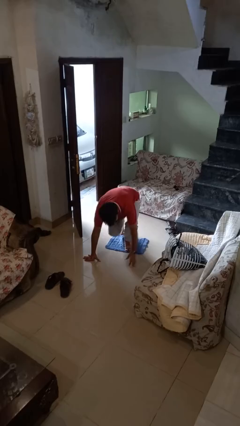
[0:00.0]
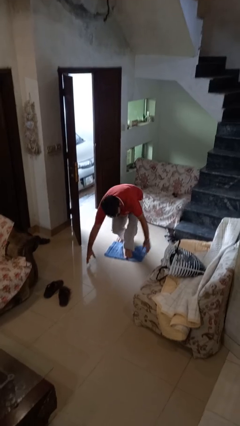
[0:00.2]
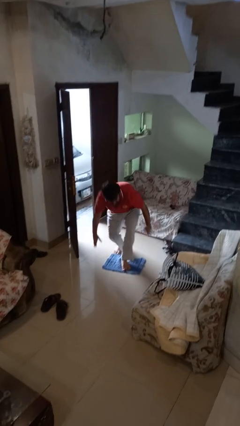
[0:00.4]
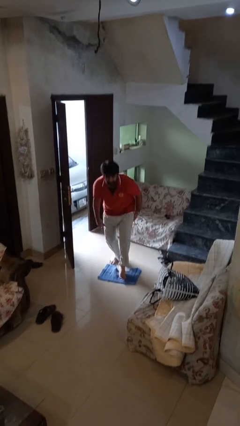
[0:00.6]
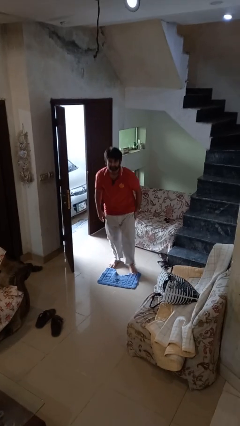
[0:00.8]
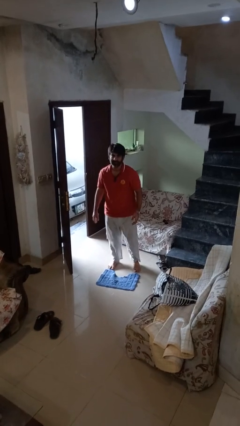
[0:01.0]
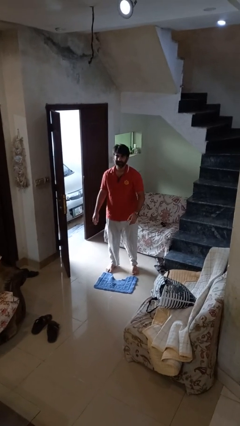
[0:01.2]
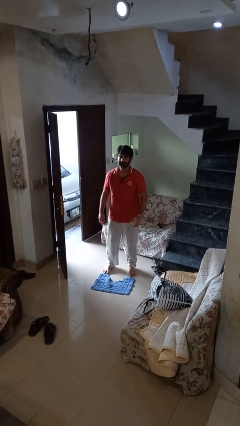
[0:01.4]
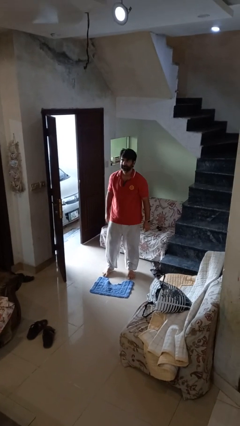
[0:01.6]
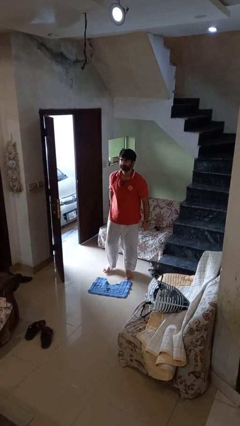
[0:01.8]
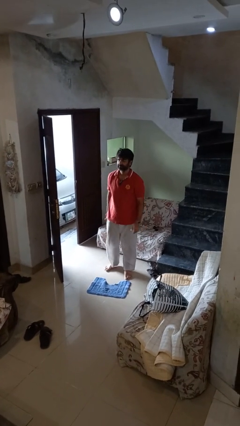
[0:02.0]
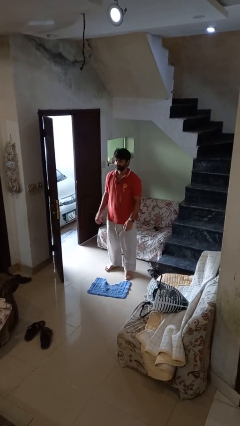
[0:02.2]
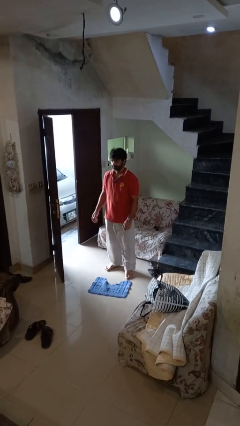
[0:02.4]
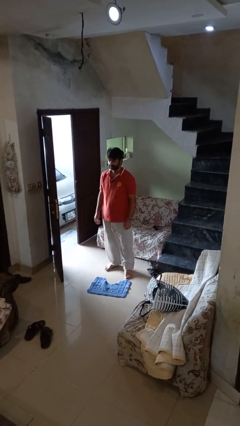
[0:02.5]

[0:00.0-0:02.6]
person stands up from floor

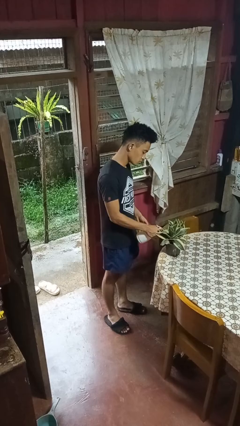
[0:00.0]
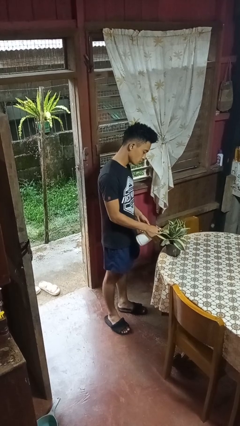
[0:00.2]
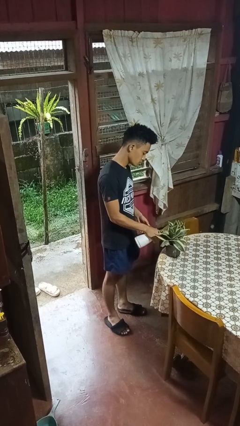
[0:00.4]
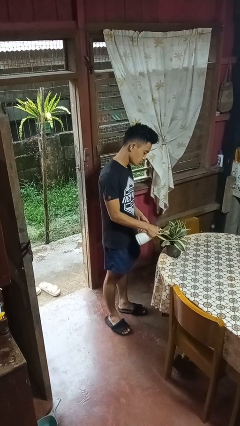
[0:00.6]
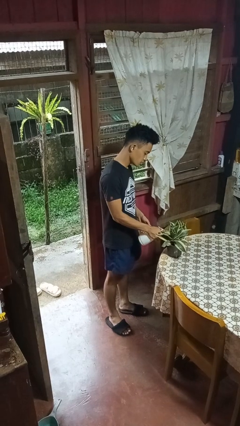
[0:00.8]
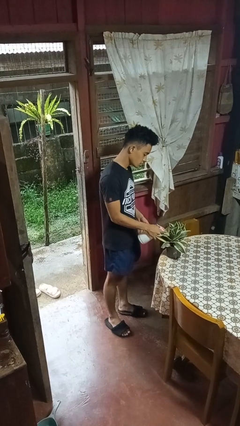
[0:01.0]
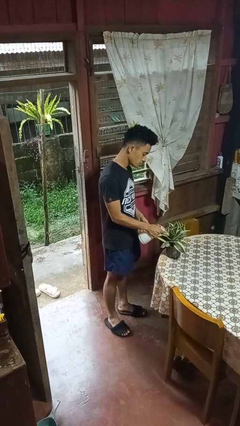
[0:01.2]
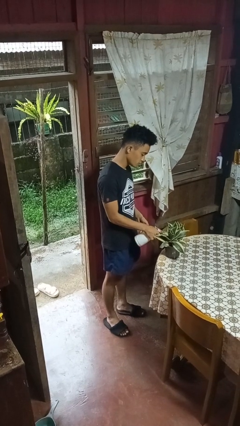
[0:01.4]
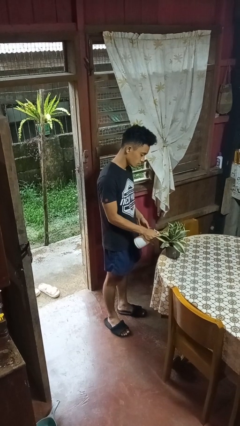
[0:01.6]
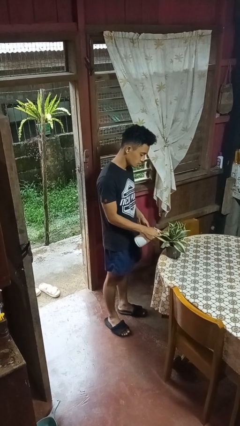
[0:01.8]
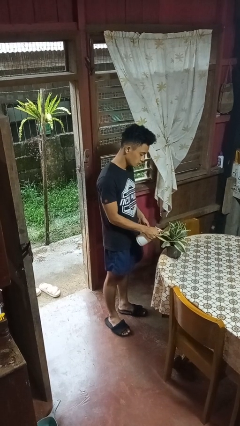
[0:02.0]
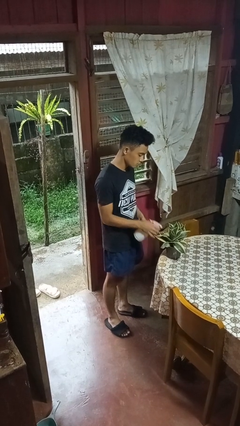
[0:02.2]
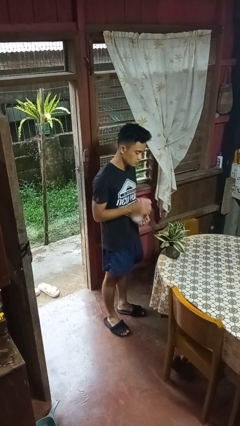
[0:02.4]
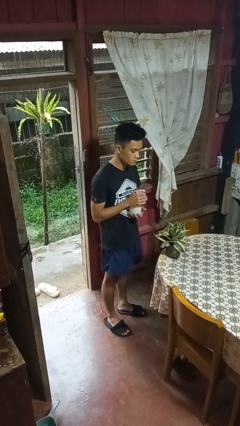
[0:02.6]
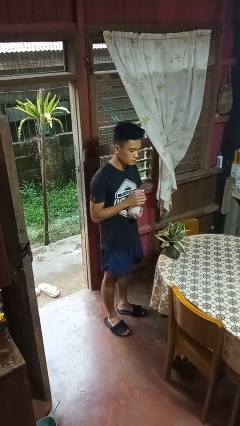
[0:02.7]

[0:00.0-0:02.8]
person waters houseplant

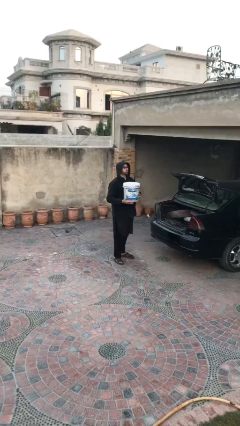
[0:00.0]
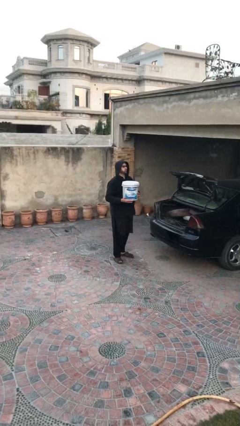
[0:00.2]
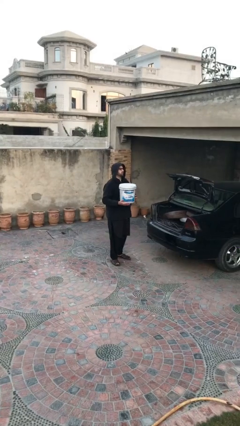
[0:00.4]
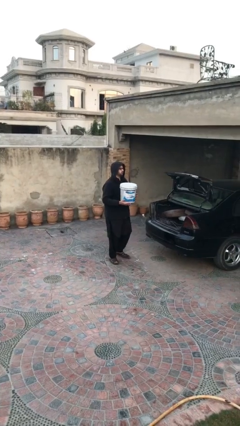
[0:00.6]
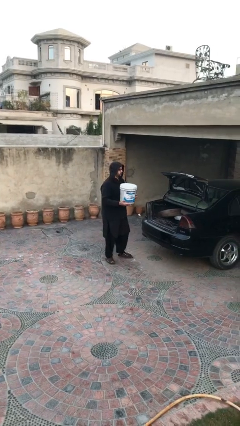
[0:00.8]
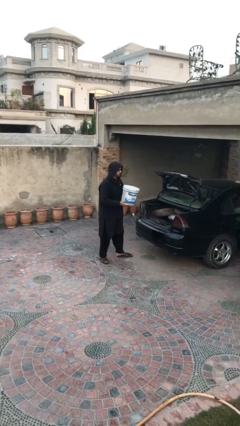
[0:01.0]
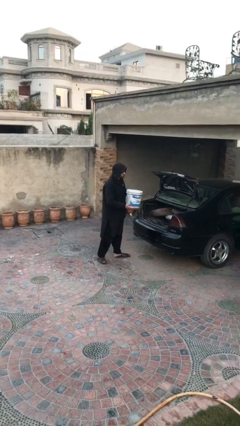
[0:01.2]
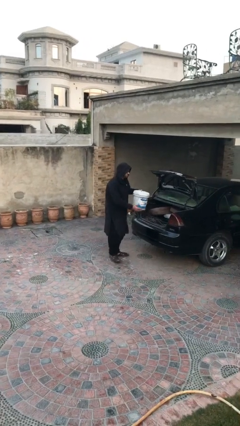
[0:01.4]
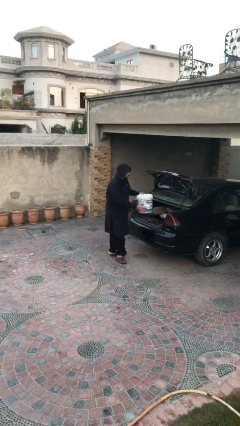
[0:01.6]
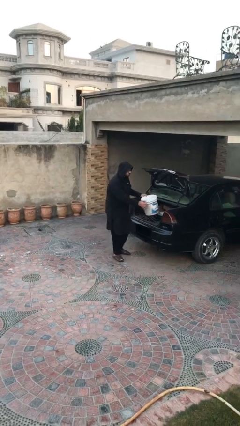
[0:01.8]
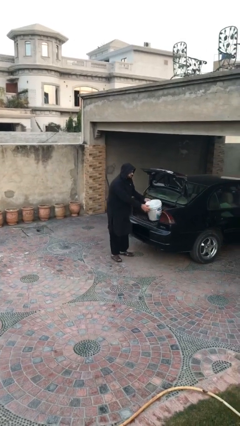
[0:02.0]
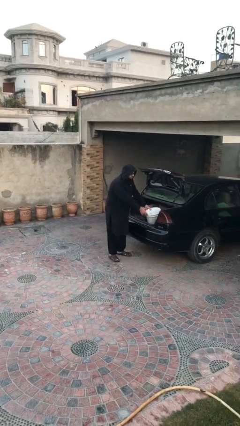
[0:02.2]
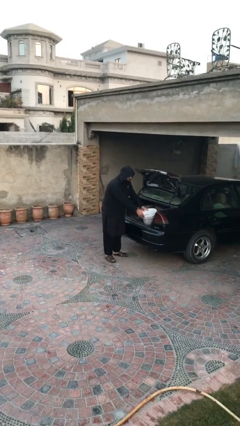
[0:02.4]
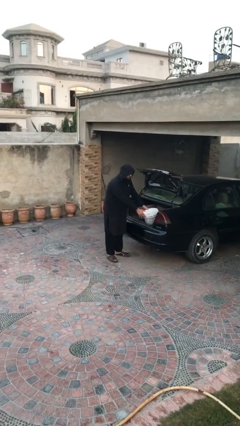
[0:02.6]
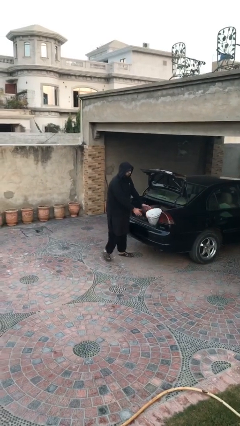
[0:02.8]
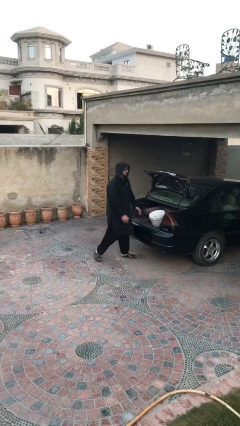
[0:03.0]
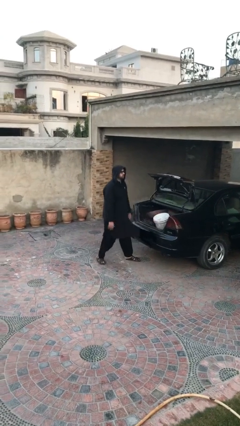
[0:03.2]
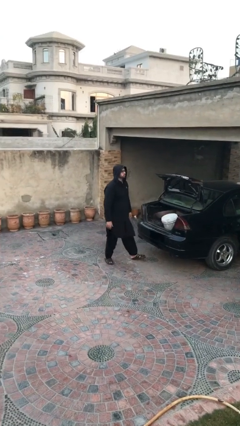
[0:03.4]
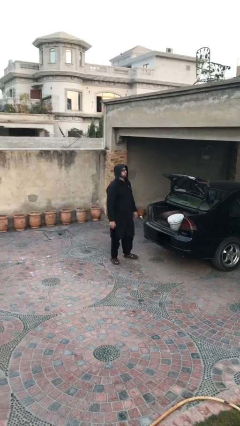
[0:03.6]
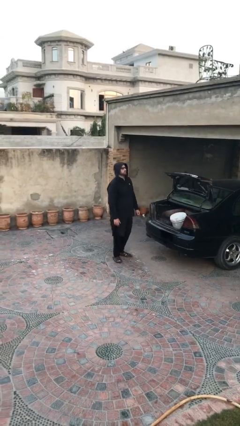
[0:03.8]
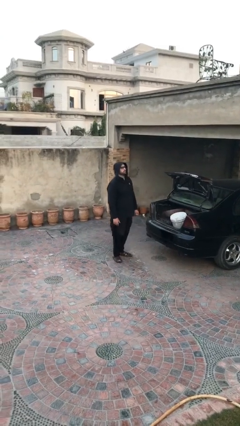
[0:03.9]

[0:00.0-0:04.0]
person loads car

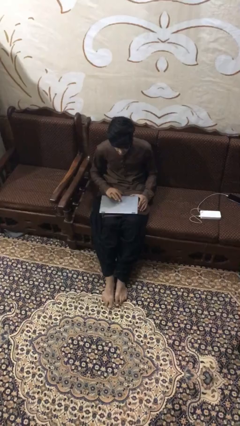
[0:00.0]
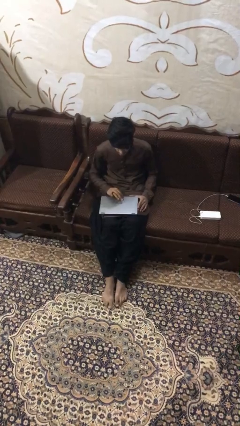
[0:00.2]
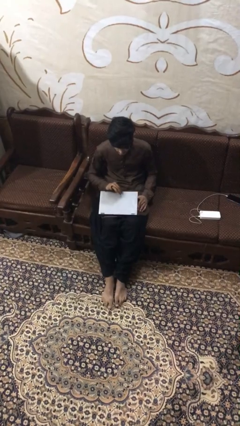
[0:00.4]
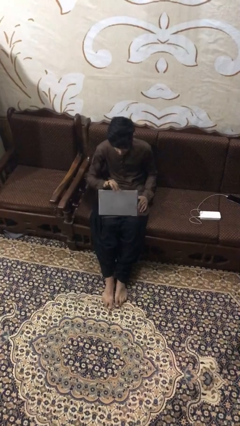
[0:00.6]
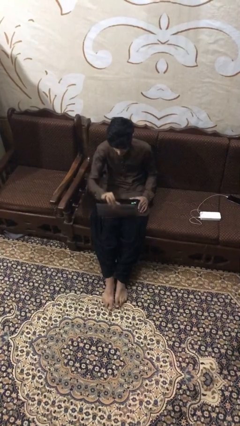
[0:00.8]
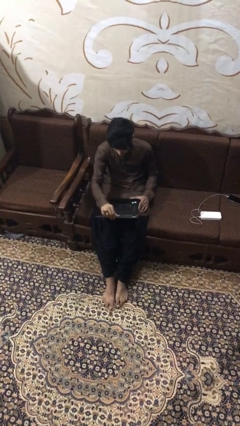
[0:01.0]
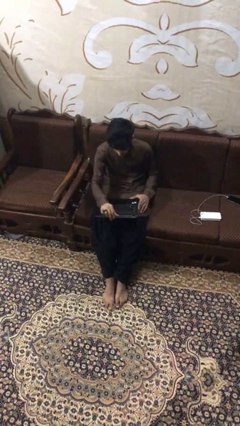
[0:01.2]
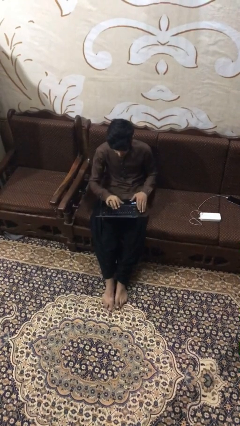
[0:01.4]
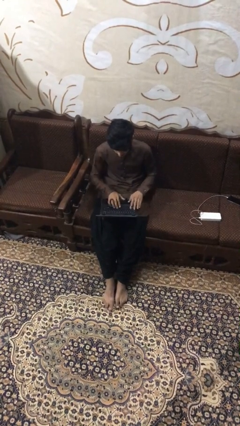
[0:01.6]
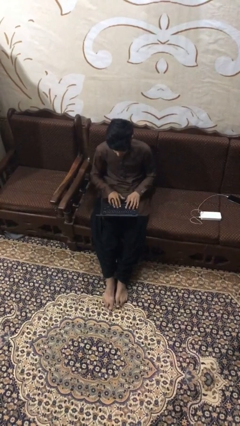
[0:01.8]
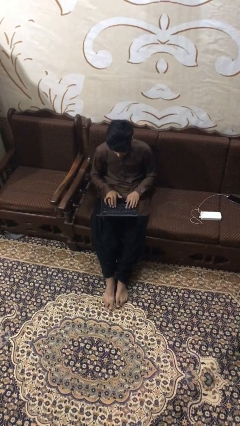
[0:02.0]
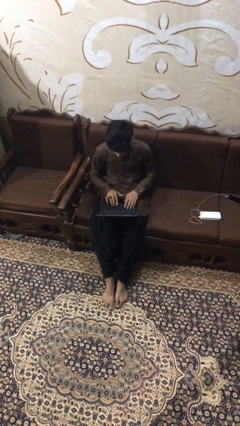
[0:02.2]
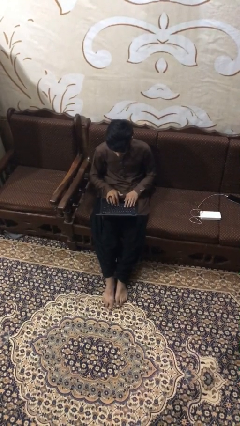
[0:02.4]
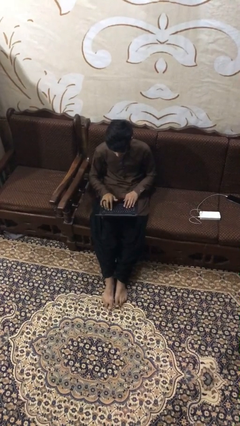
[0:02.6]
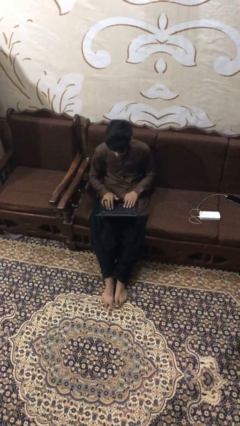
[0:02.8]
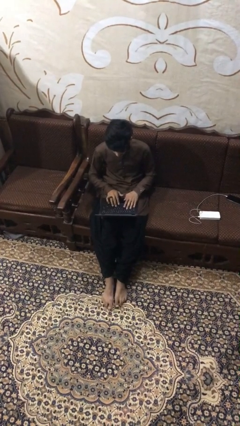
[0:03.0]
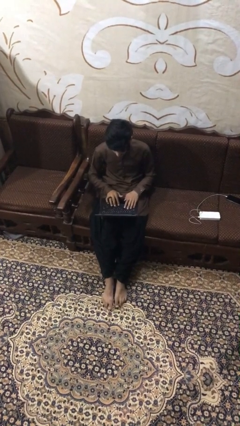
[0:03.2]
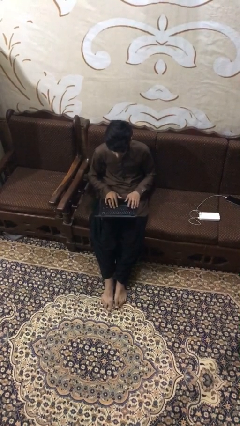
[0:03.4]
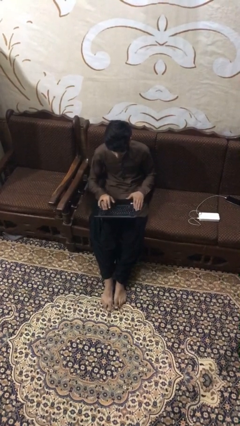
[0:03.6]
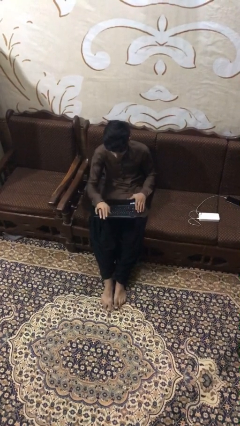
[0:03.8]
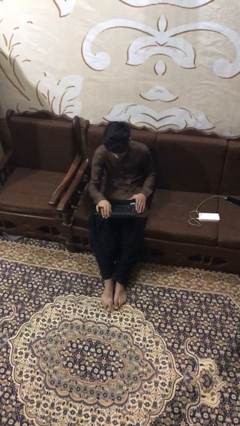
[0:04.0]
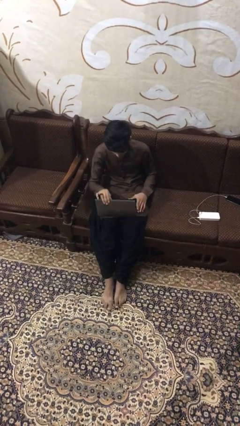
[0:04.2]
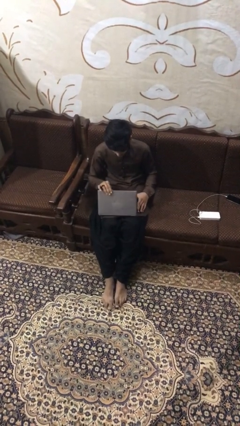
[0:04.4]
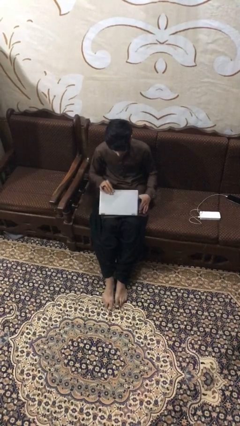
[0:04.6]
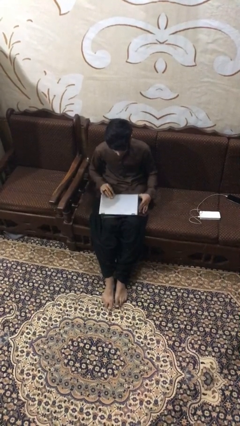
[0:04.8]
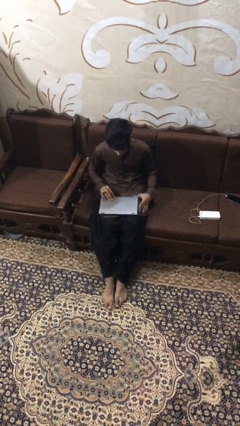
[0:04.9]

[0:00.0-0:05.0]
person interacts with laptop

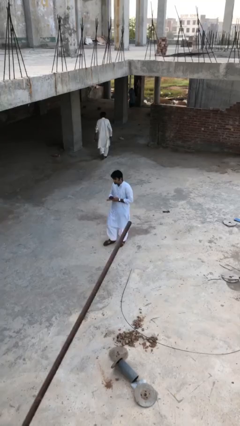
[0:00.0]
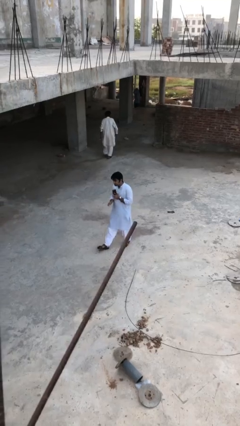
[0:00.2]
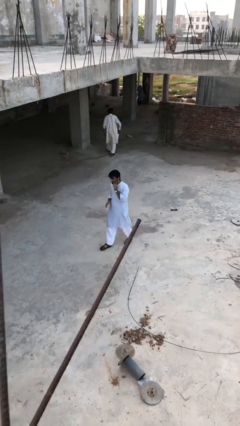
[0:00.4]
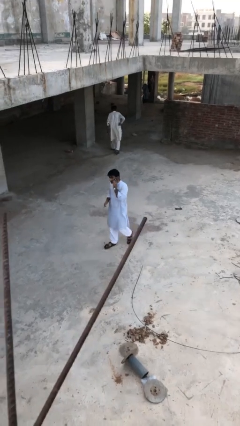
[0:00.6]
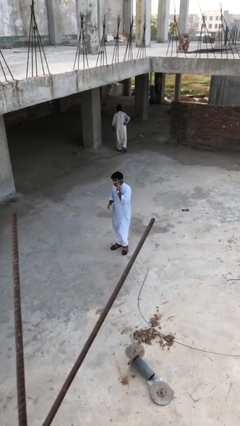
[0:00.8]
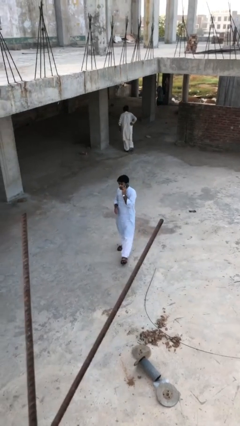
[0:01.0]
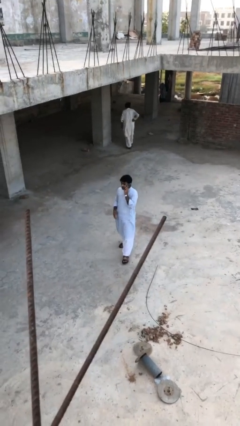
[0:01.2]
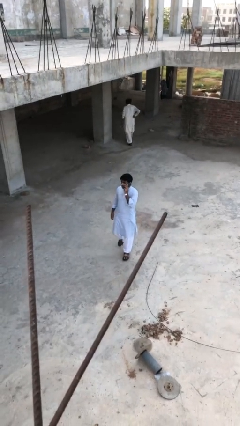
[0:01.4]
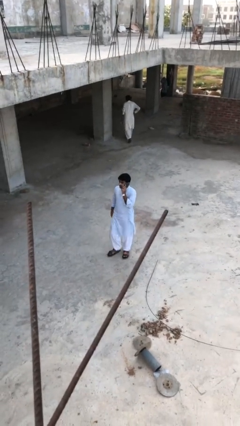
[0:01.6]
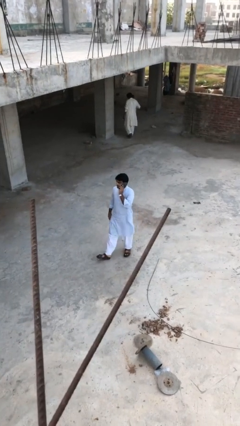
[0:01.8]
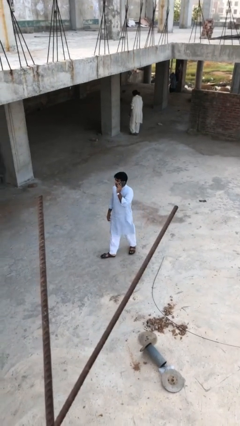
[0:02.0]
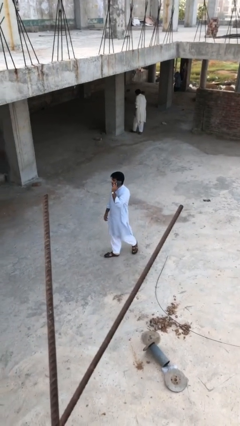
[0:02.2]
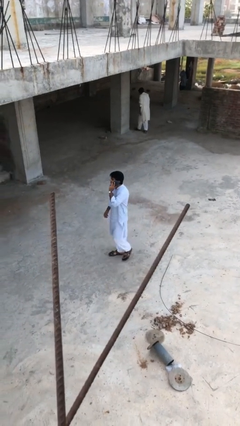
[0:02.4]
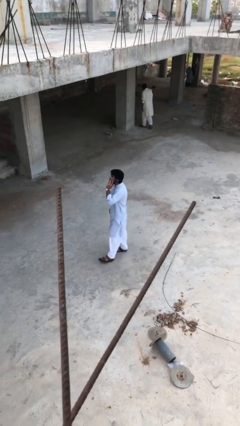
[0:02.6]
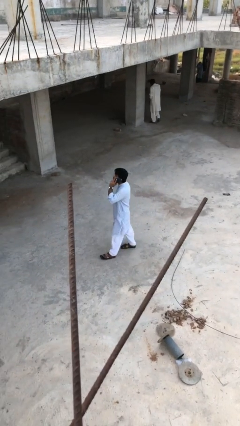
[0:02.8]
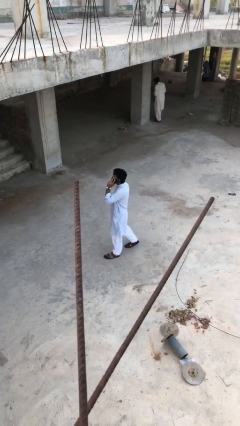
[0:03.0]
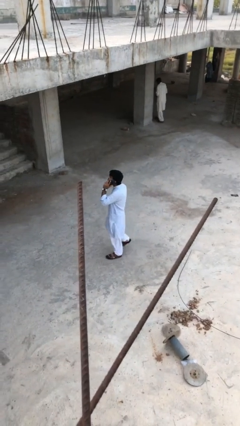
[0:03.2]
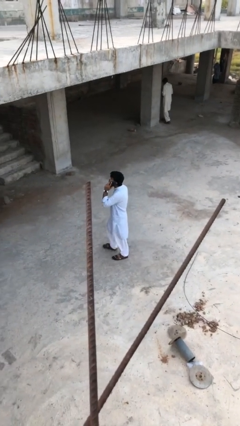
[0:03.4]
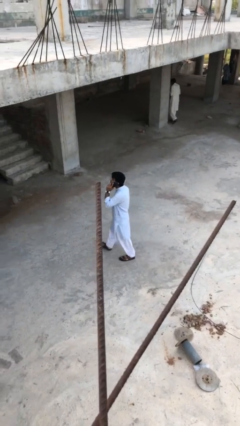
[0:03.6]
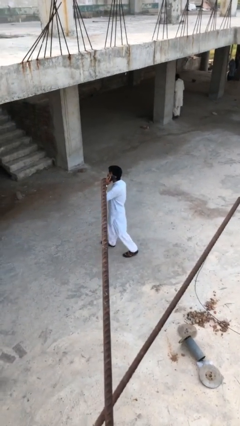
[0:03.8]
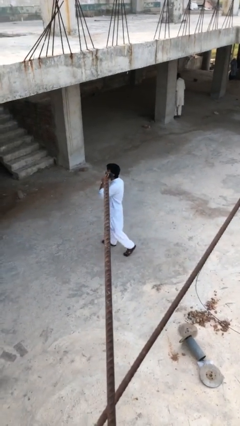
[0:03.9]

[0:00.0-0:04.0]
person talks on phone
